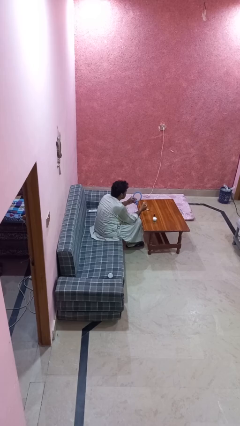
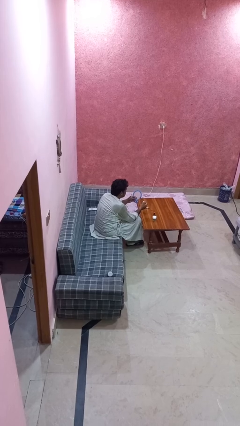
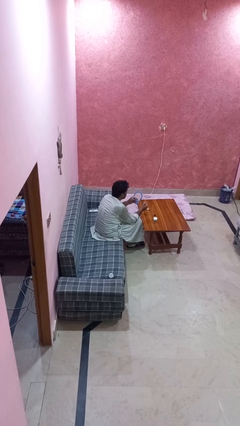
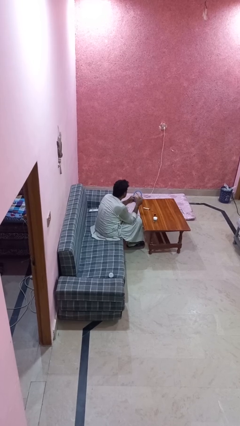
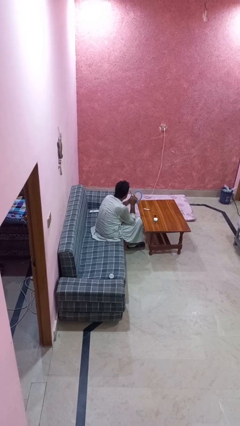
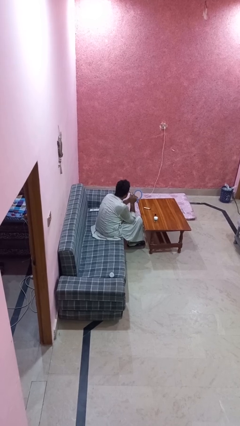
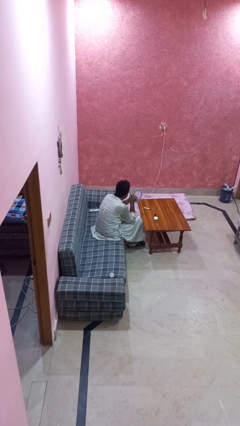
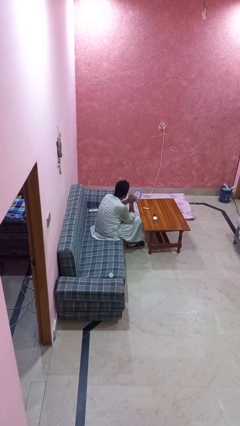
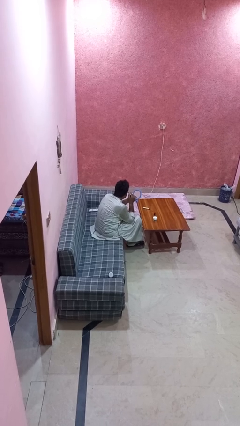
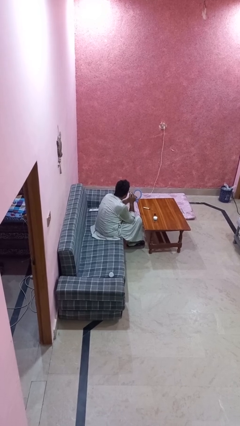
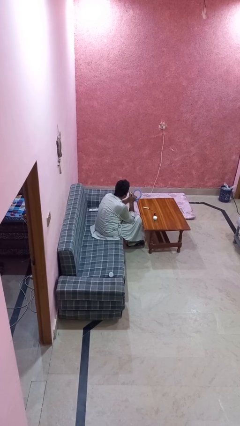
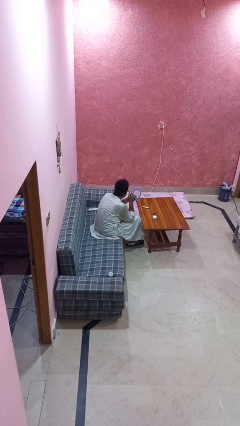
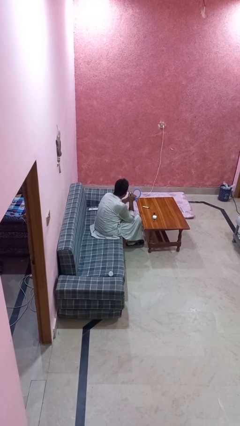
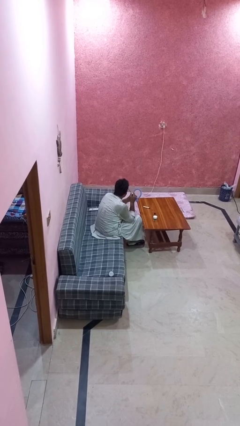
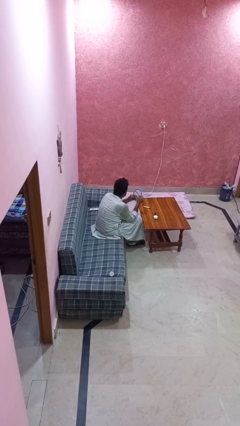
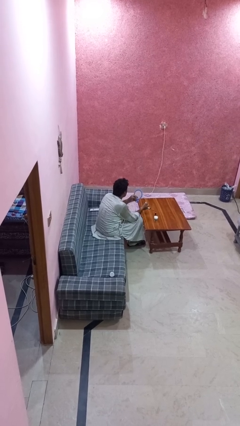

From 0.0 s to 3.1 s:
person applies eye makeup

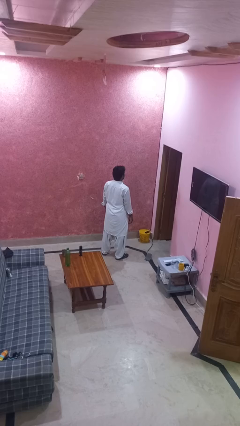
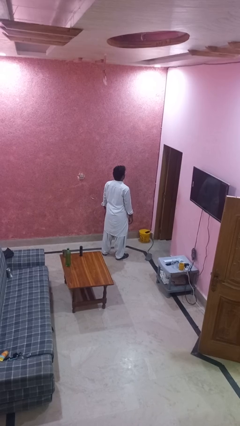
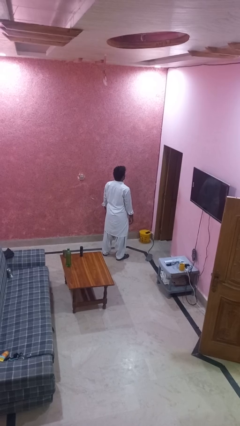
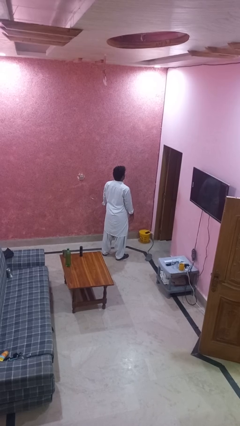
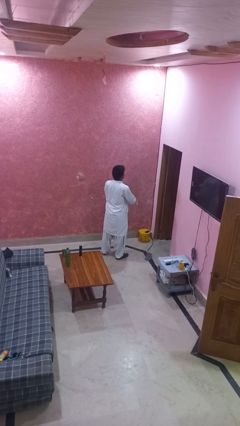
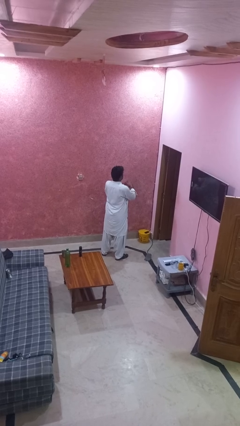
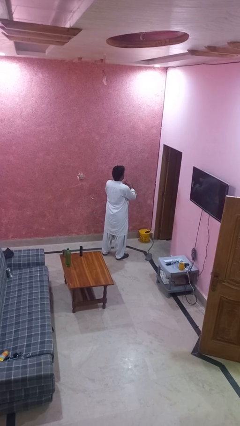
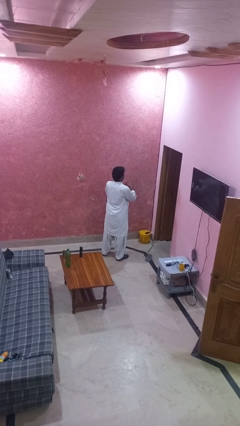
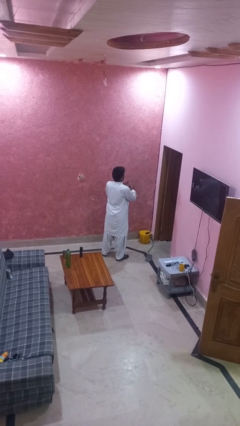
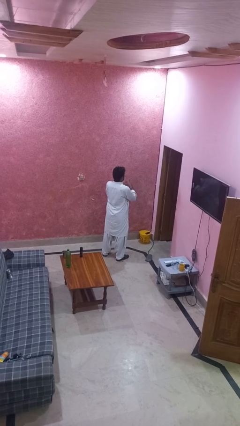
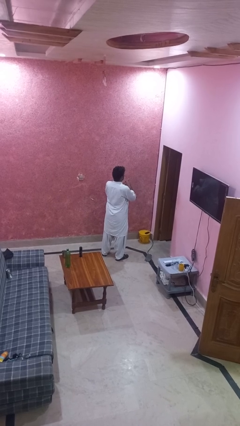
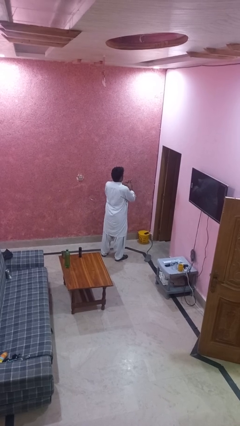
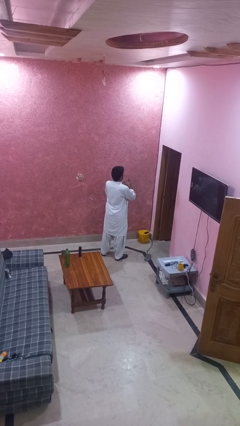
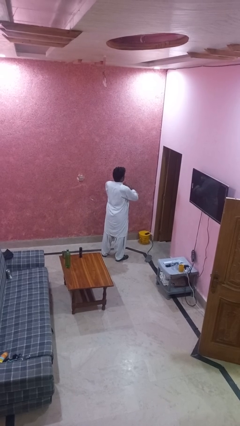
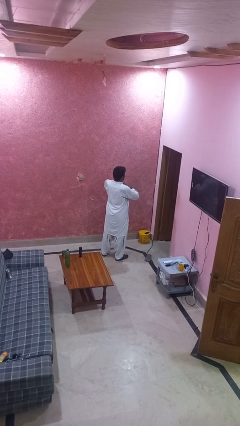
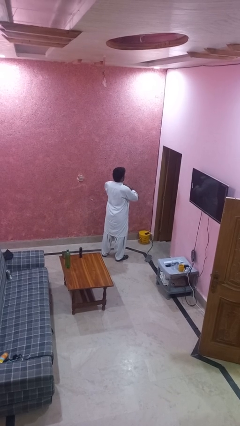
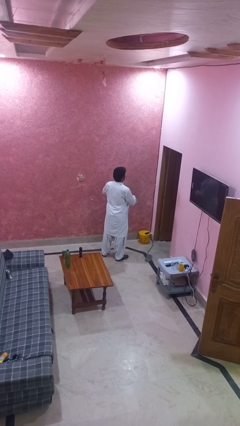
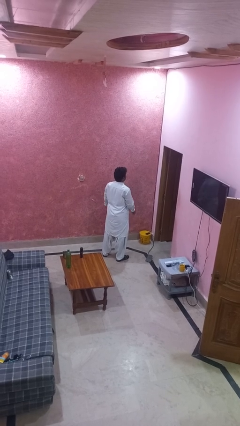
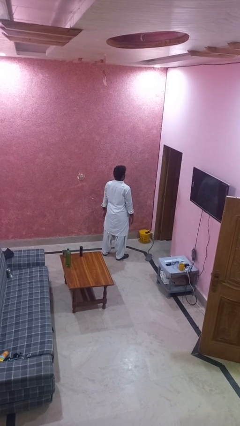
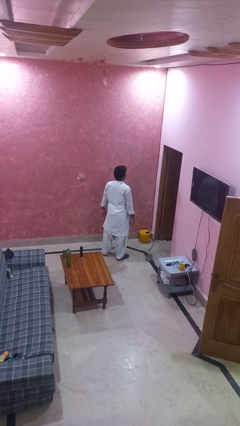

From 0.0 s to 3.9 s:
person snaps fingers

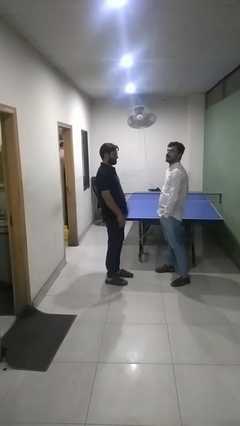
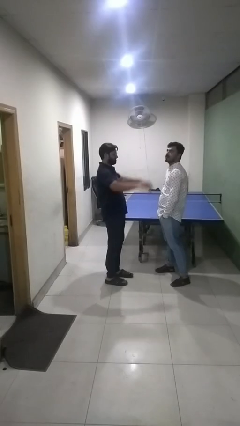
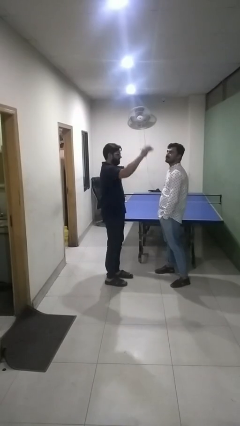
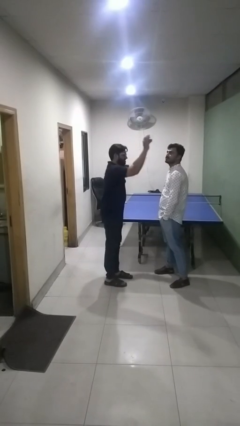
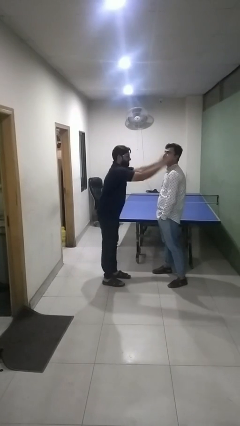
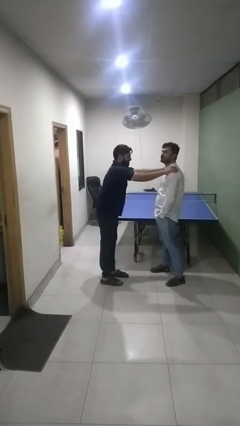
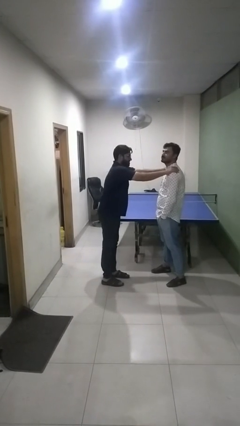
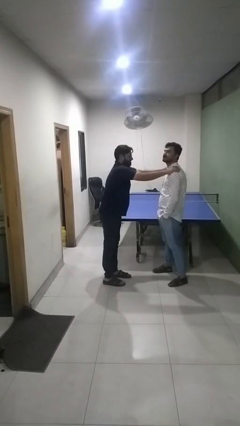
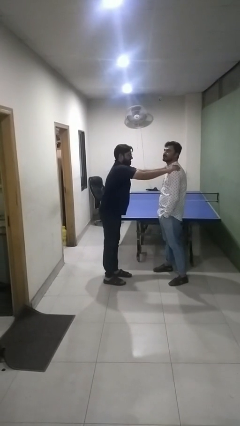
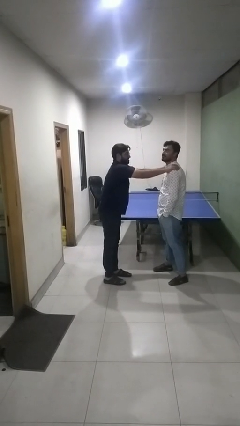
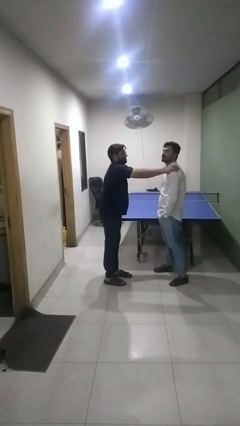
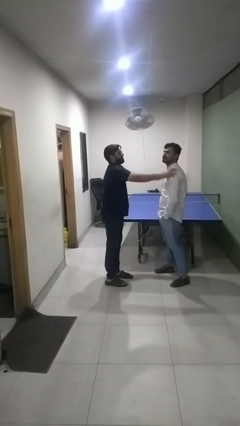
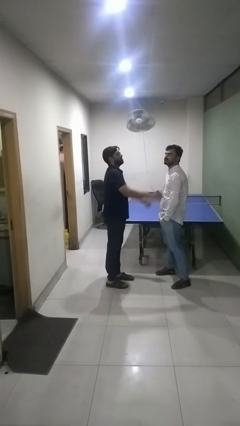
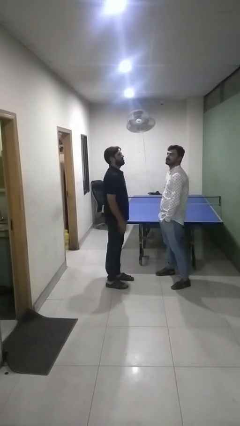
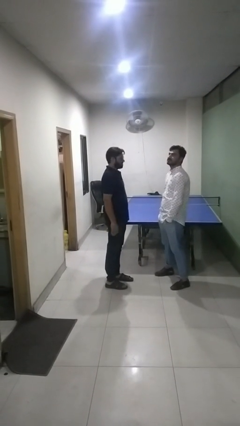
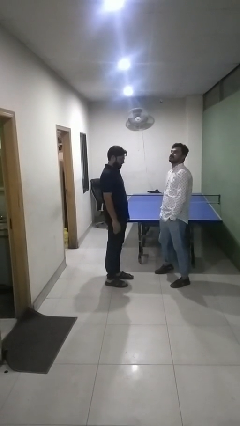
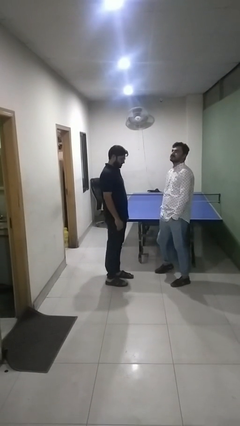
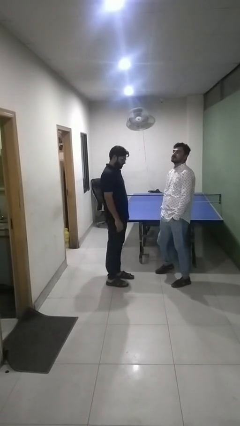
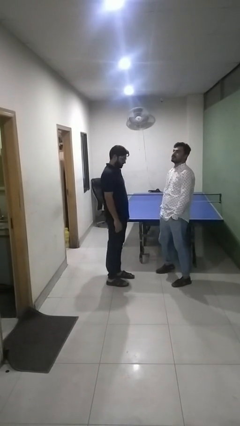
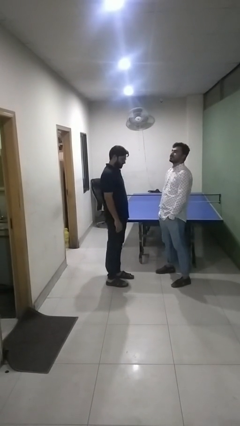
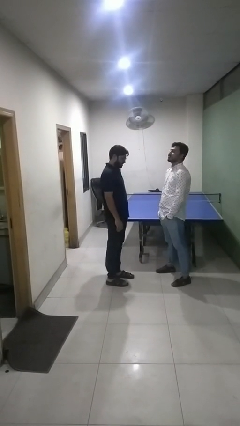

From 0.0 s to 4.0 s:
person points at person

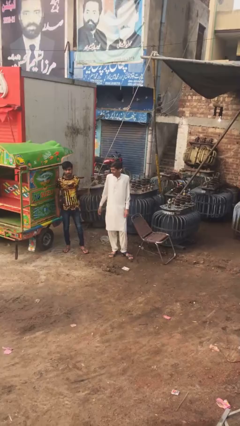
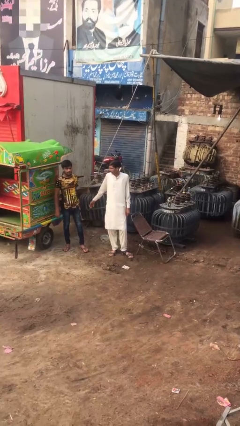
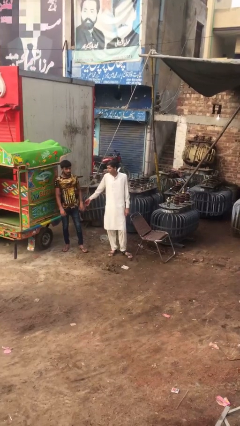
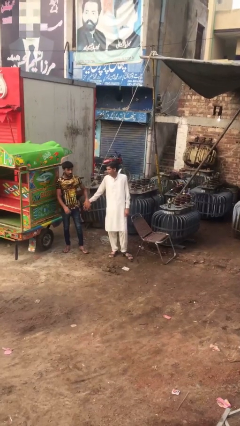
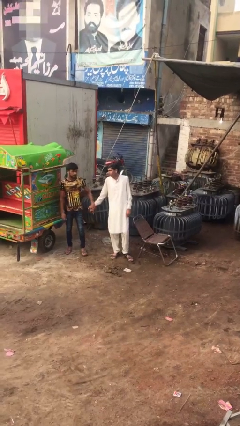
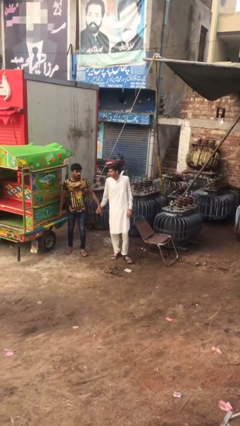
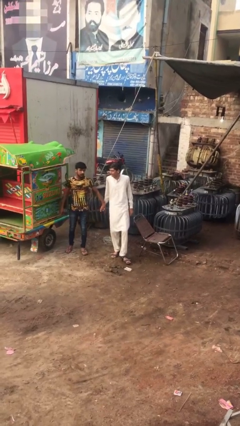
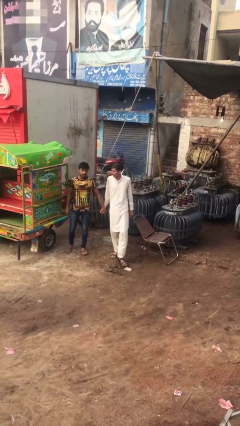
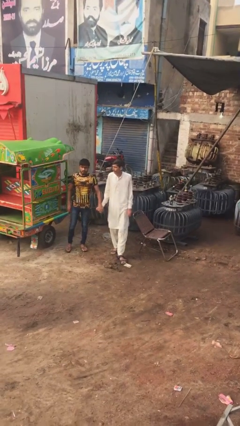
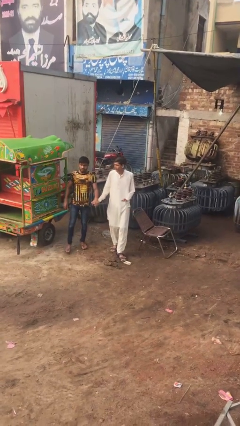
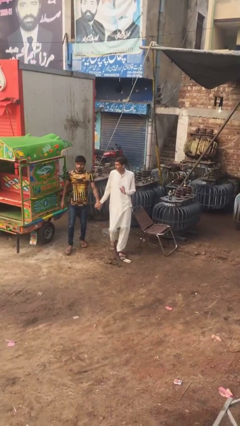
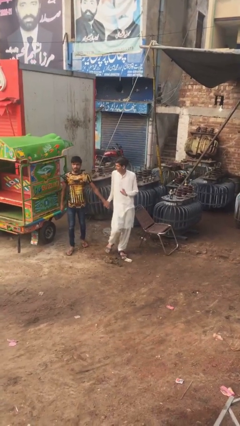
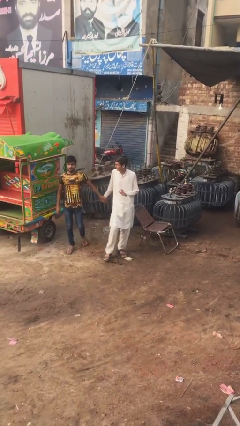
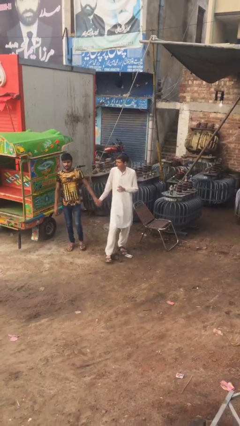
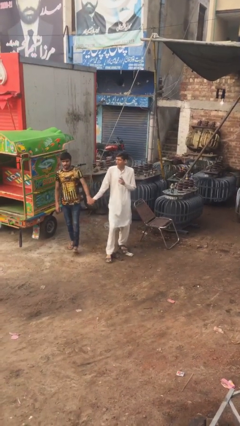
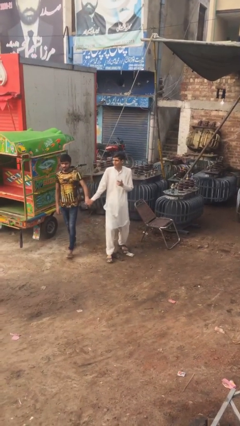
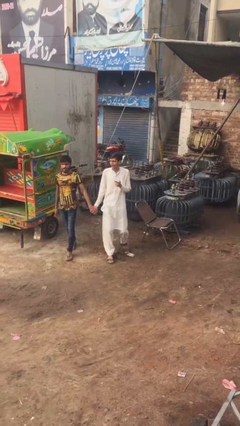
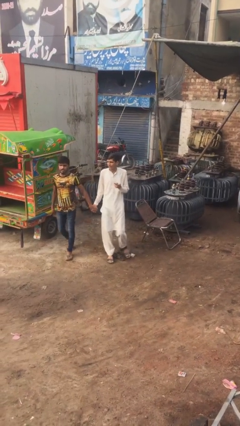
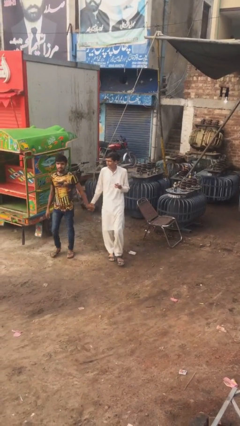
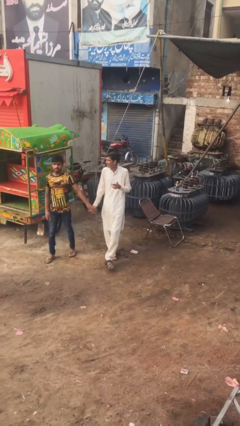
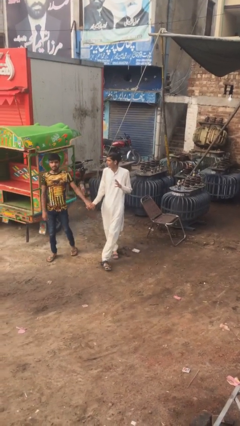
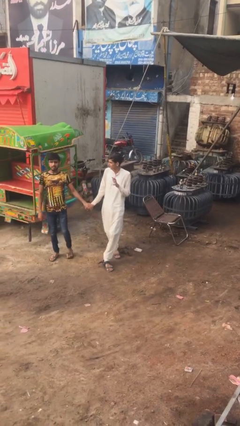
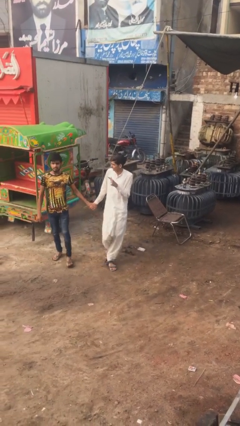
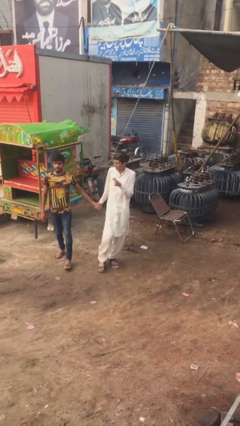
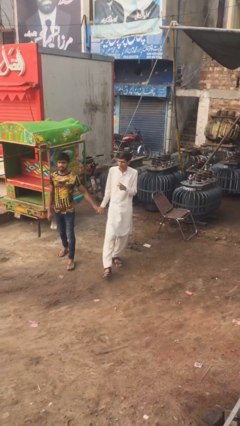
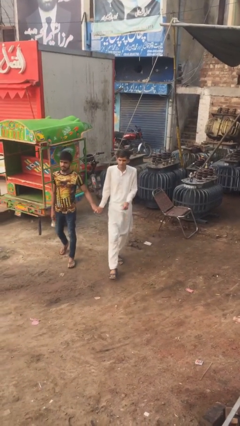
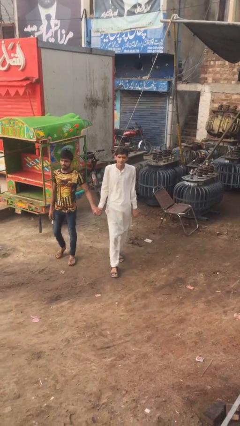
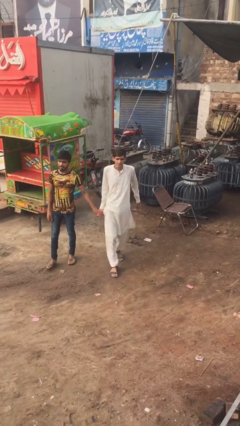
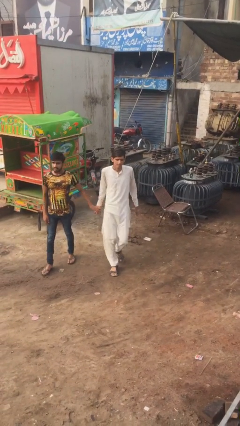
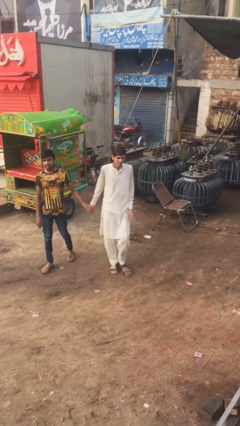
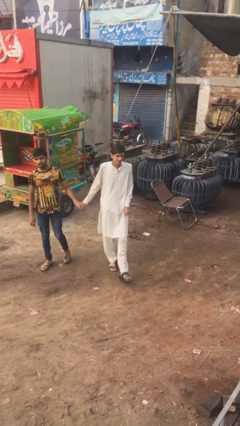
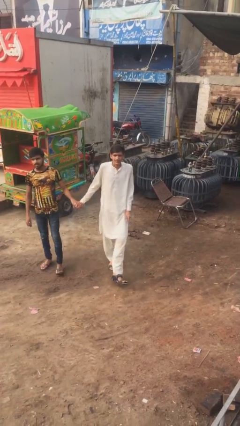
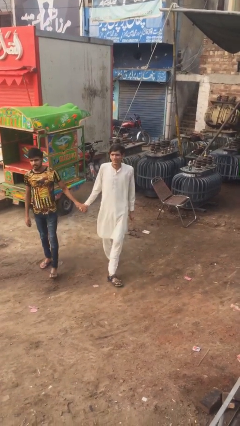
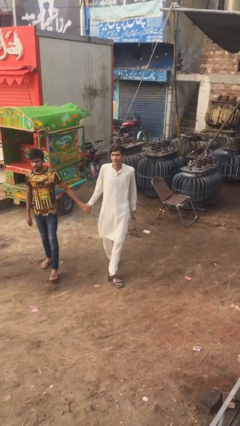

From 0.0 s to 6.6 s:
person holds hand

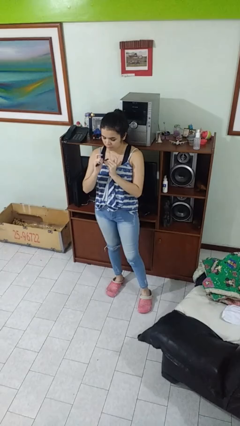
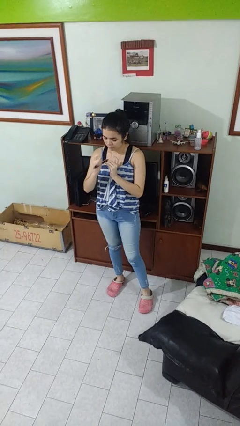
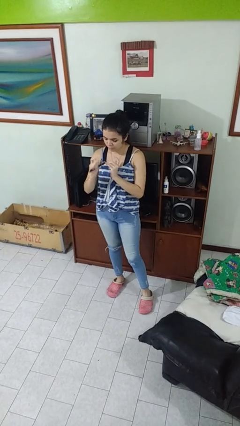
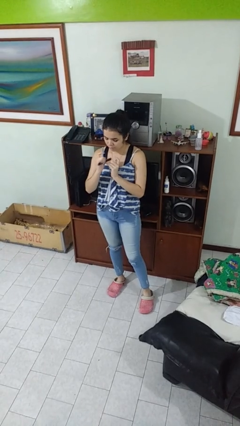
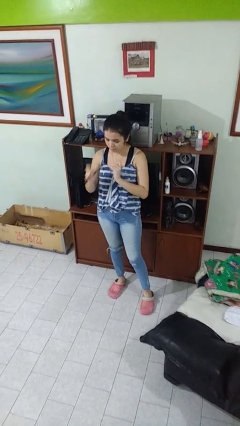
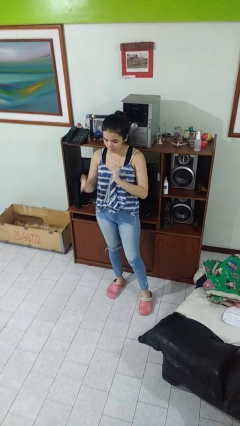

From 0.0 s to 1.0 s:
person files fingernails
